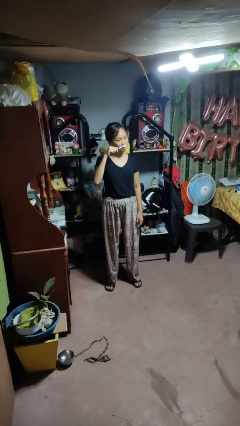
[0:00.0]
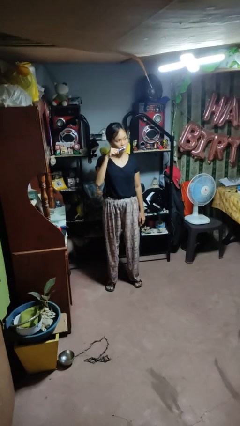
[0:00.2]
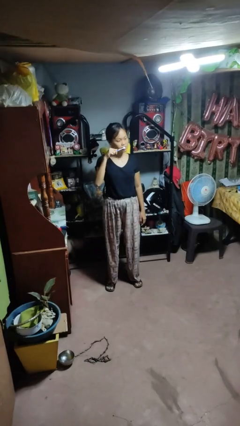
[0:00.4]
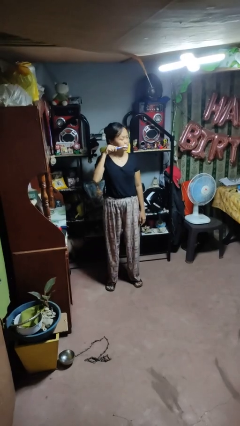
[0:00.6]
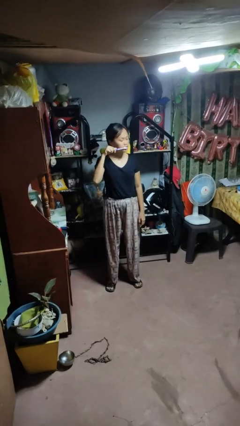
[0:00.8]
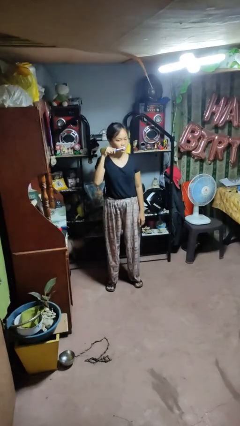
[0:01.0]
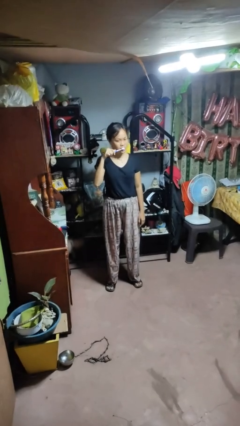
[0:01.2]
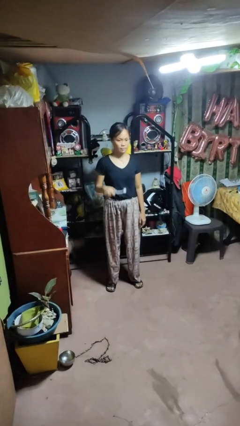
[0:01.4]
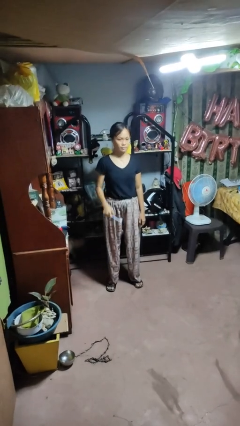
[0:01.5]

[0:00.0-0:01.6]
person brushes teeth

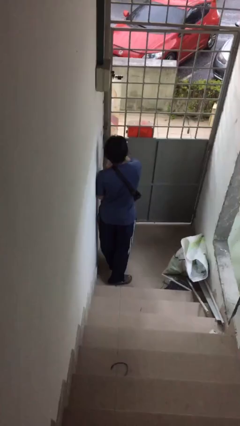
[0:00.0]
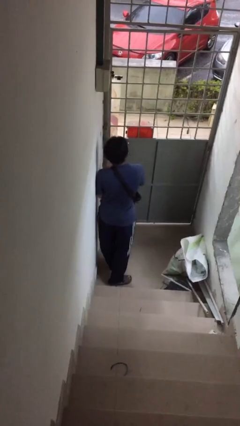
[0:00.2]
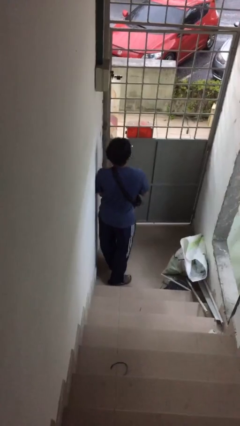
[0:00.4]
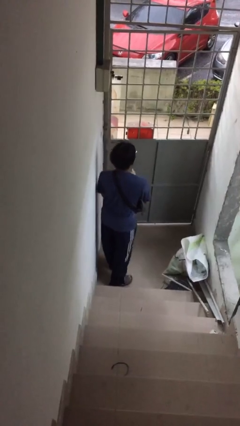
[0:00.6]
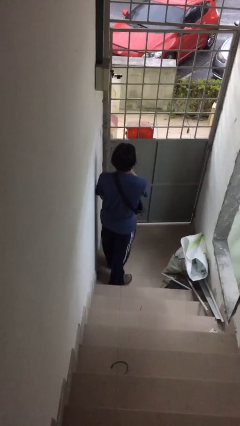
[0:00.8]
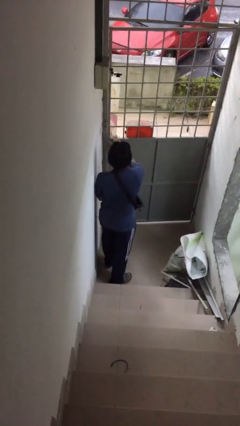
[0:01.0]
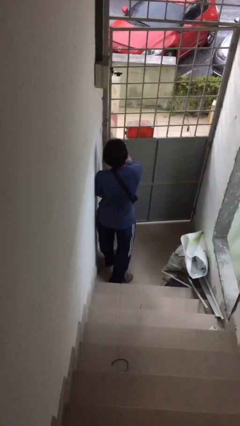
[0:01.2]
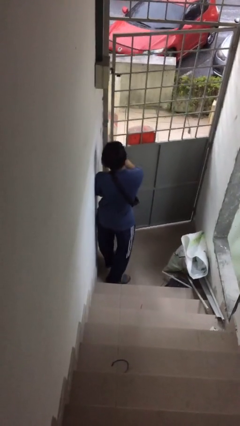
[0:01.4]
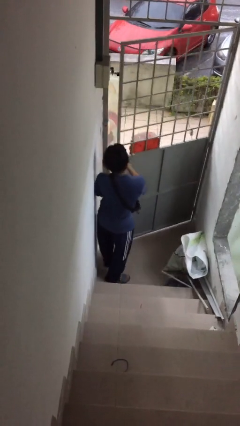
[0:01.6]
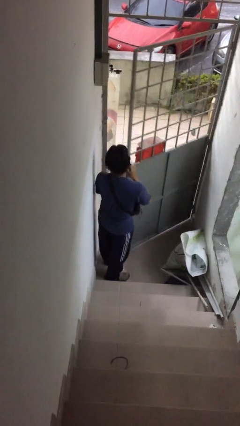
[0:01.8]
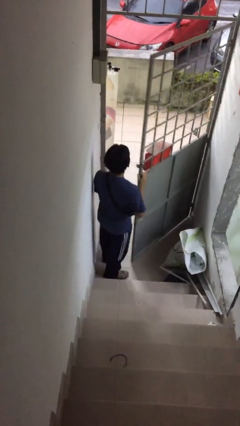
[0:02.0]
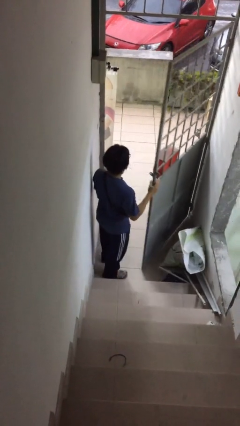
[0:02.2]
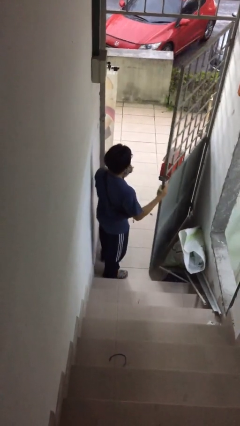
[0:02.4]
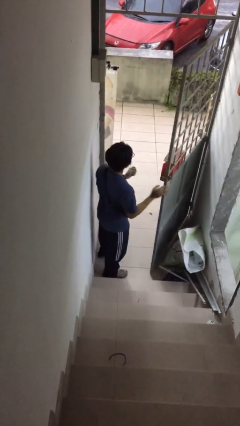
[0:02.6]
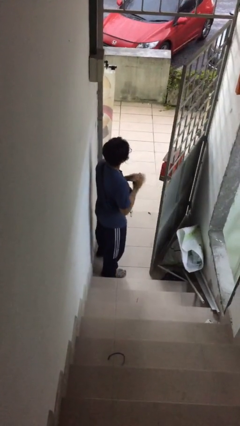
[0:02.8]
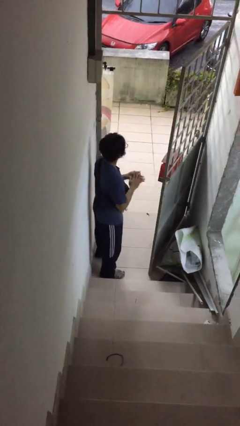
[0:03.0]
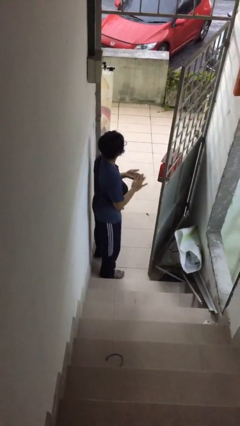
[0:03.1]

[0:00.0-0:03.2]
person opens facility door

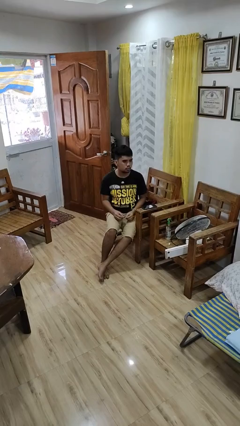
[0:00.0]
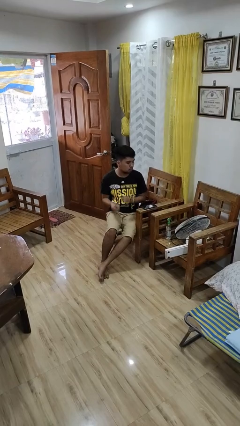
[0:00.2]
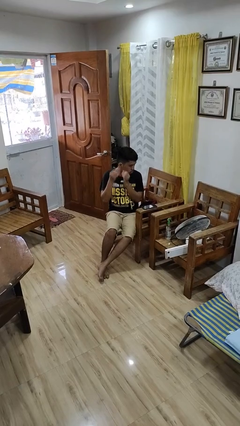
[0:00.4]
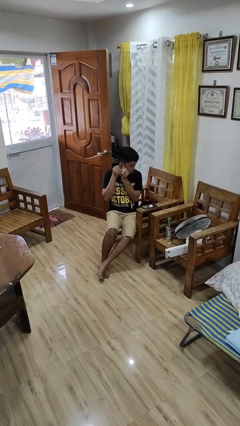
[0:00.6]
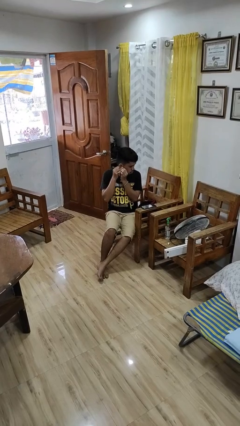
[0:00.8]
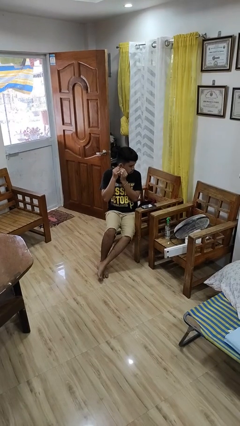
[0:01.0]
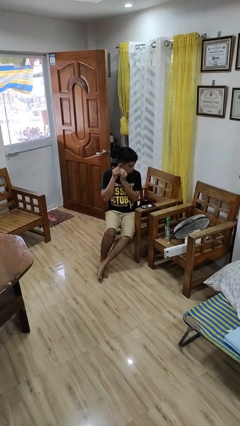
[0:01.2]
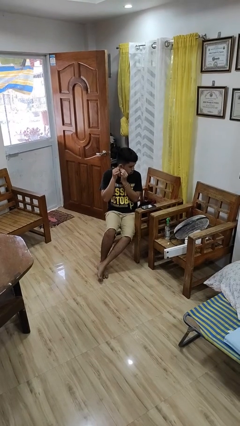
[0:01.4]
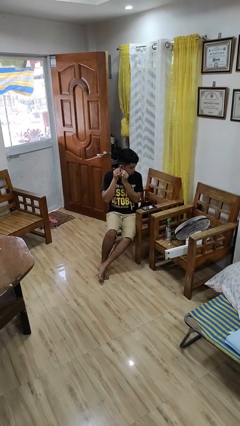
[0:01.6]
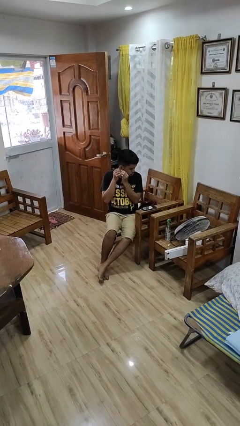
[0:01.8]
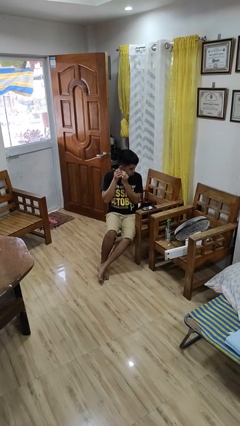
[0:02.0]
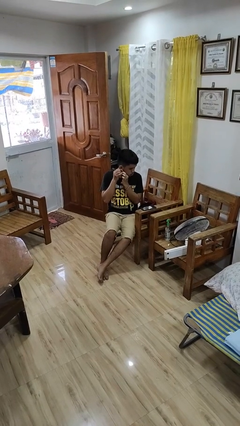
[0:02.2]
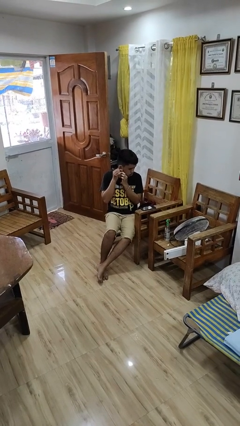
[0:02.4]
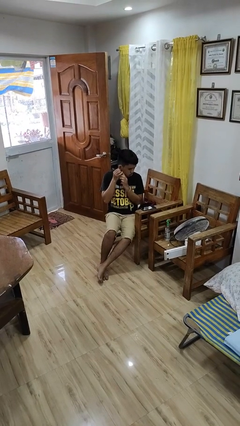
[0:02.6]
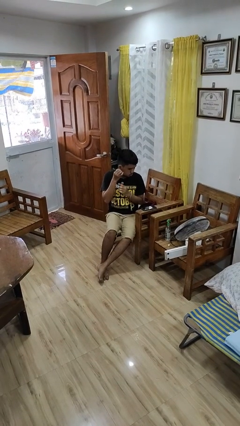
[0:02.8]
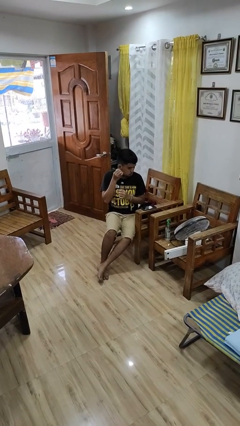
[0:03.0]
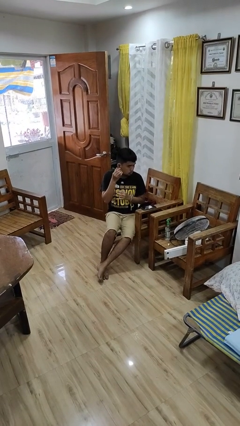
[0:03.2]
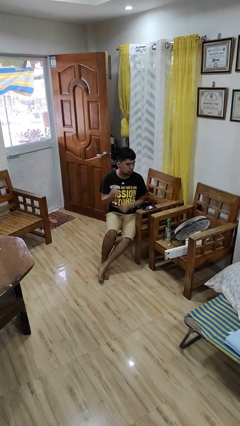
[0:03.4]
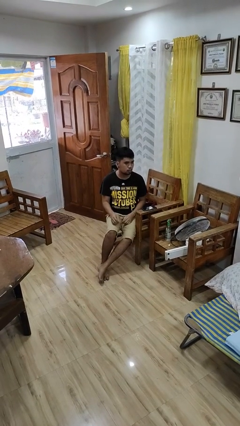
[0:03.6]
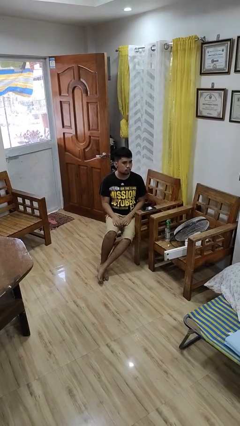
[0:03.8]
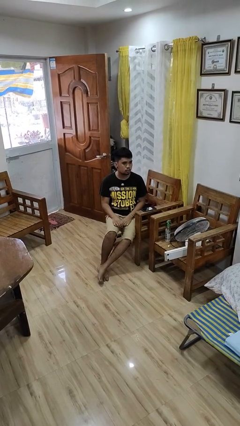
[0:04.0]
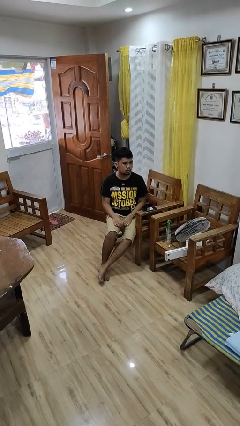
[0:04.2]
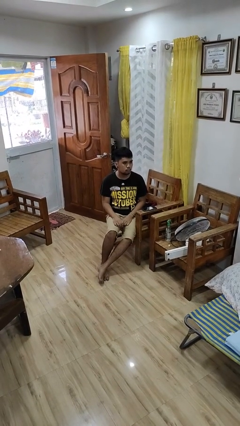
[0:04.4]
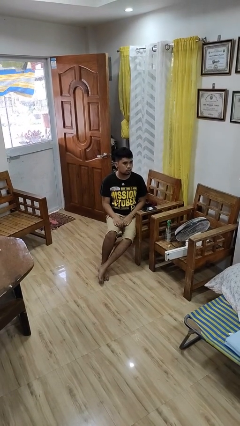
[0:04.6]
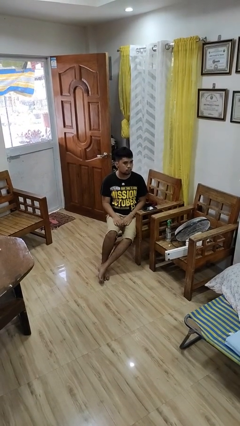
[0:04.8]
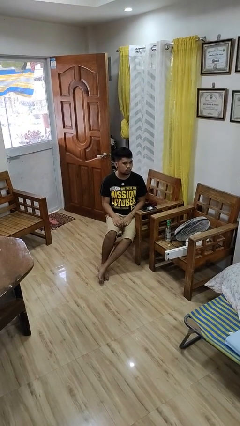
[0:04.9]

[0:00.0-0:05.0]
person puts on earrings

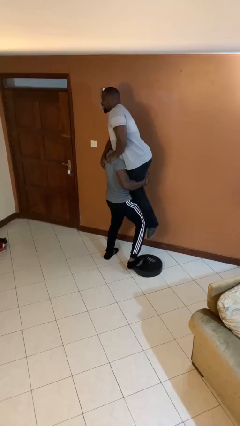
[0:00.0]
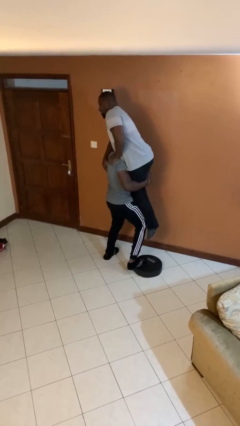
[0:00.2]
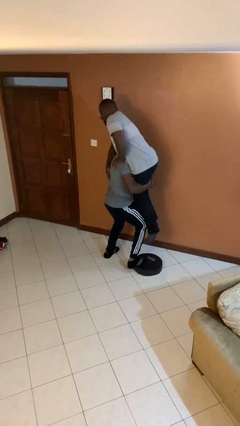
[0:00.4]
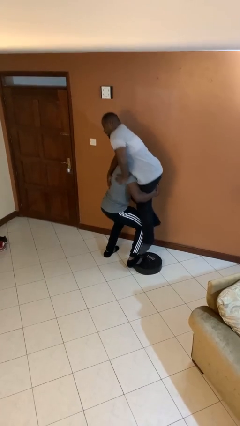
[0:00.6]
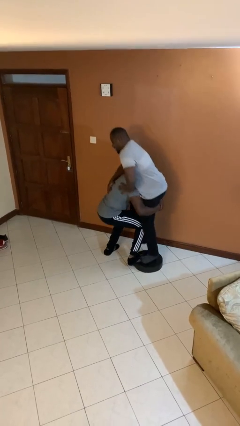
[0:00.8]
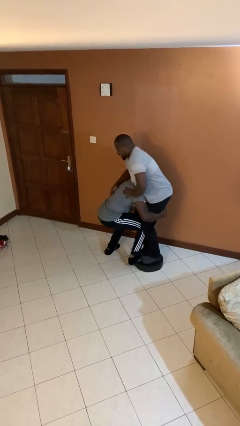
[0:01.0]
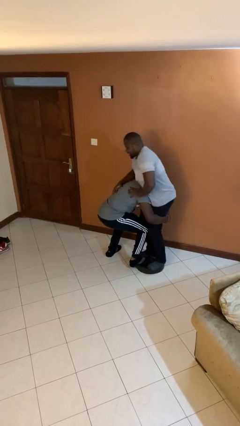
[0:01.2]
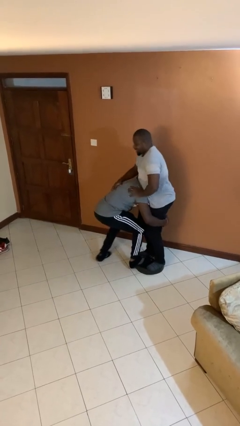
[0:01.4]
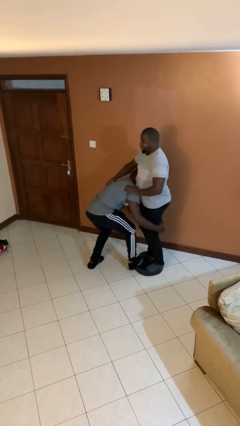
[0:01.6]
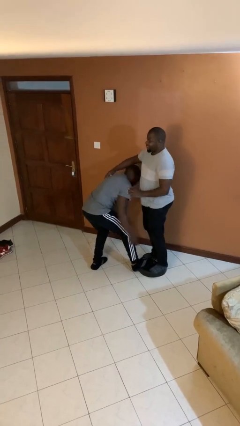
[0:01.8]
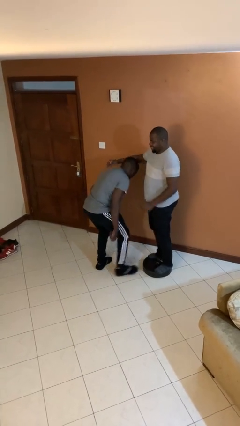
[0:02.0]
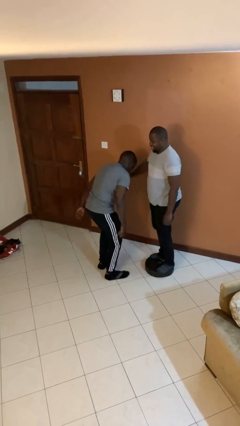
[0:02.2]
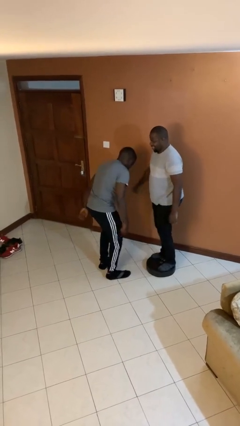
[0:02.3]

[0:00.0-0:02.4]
person puts down person

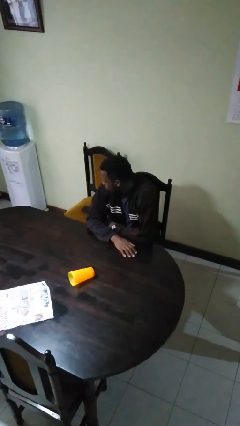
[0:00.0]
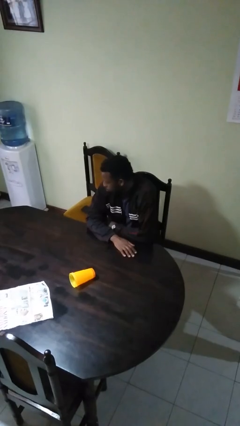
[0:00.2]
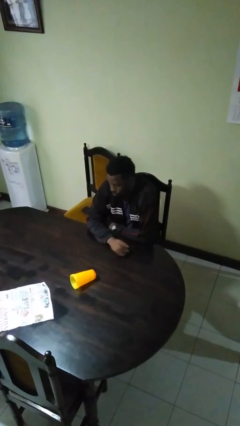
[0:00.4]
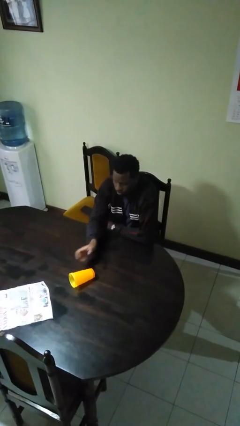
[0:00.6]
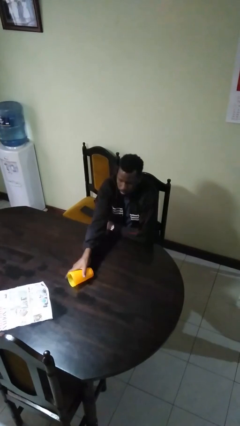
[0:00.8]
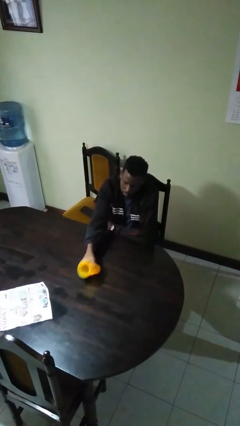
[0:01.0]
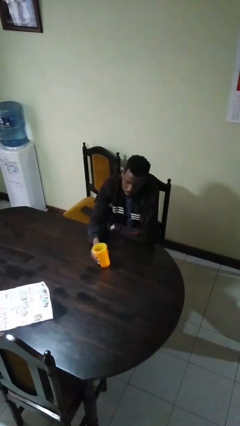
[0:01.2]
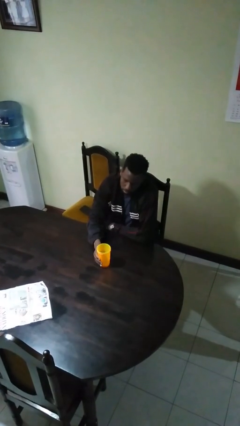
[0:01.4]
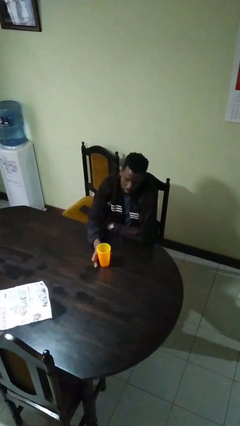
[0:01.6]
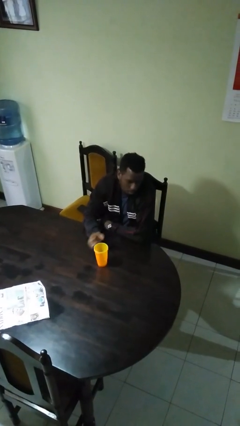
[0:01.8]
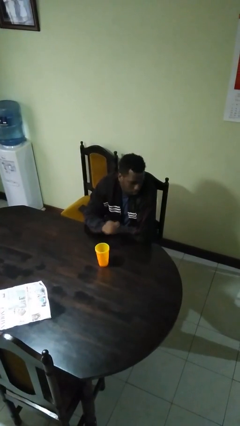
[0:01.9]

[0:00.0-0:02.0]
person sets upright glass

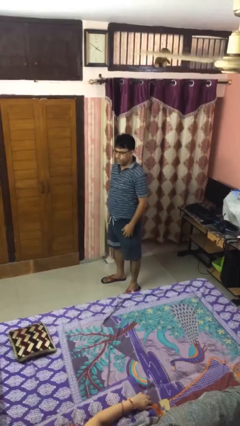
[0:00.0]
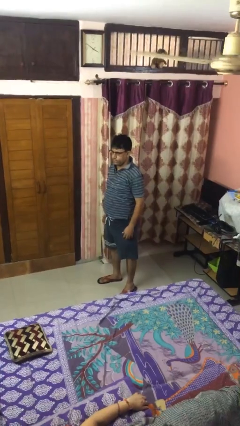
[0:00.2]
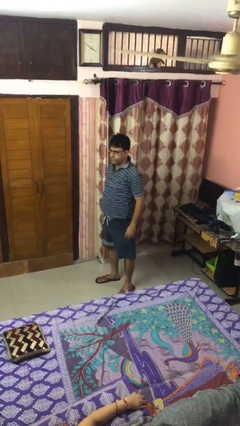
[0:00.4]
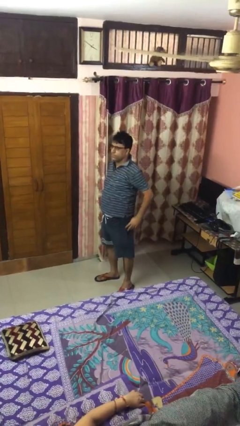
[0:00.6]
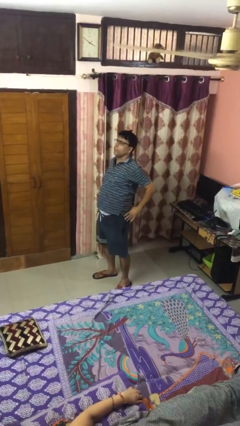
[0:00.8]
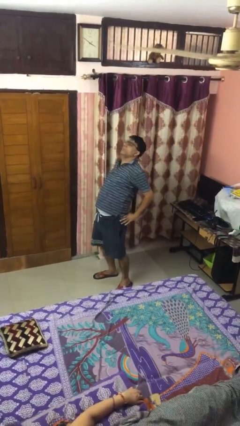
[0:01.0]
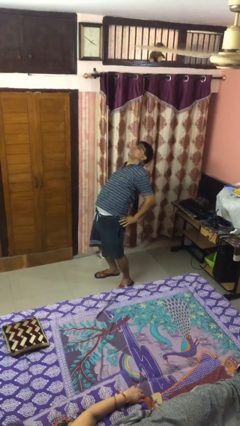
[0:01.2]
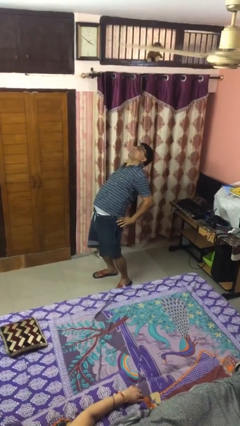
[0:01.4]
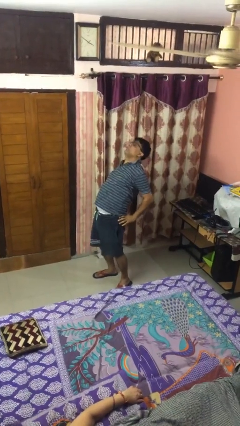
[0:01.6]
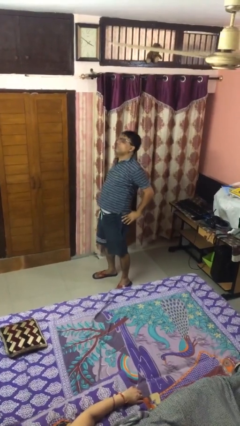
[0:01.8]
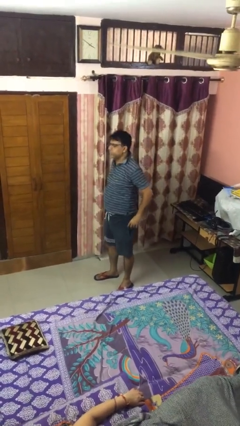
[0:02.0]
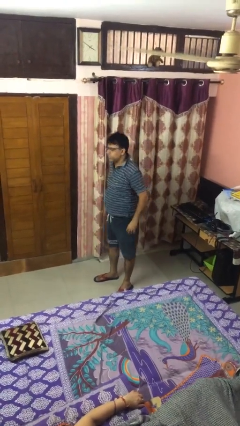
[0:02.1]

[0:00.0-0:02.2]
person stretches back

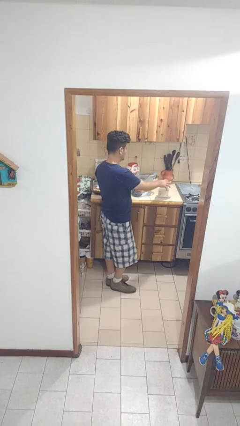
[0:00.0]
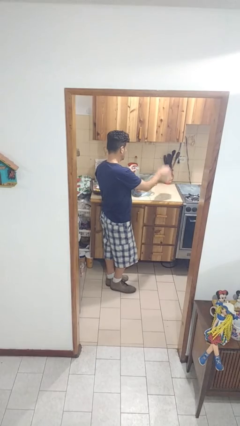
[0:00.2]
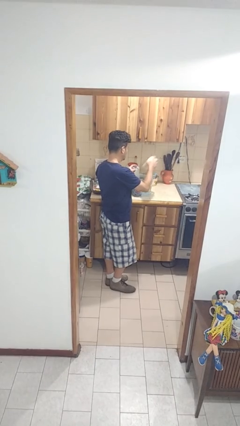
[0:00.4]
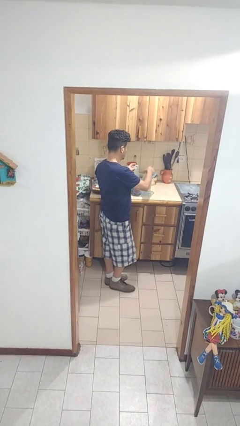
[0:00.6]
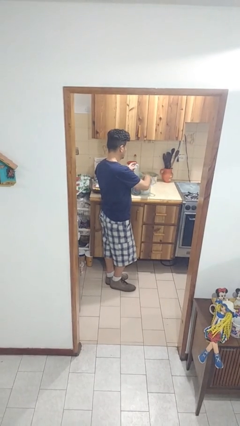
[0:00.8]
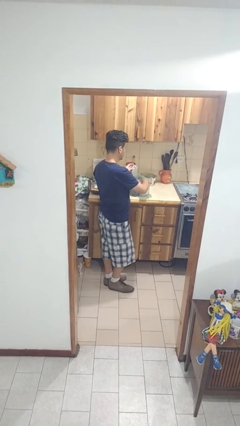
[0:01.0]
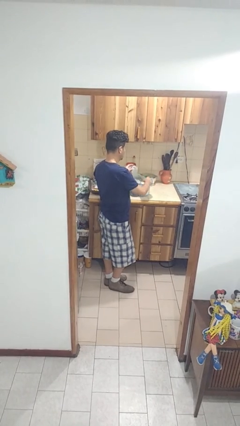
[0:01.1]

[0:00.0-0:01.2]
person puts object into bag
